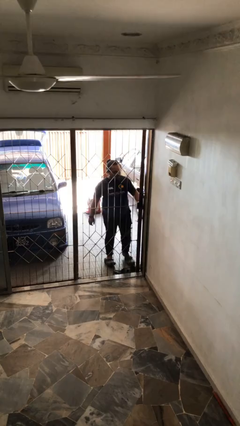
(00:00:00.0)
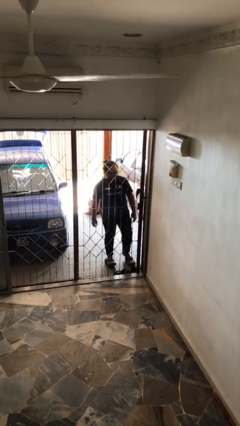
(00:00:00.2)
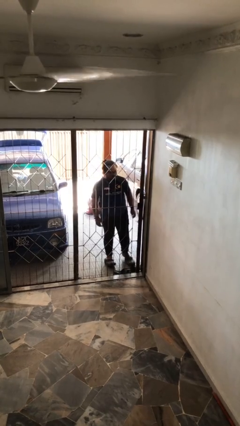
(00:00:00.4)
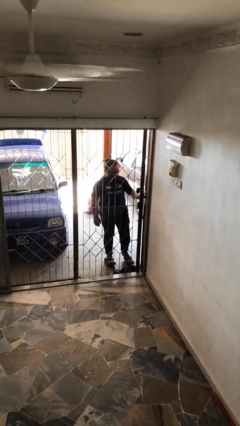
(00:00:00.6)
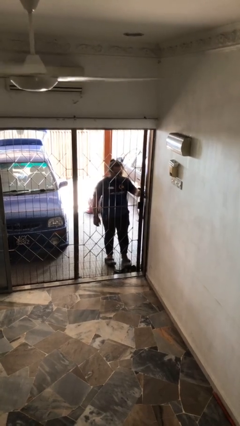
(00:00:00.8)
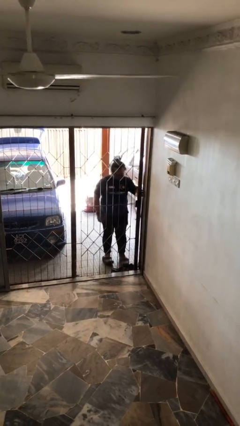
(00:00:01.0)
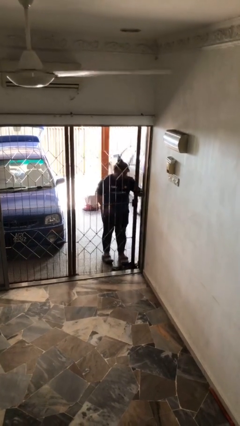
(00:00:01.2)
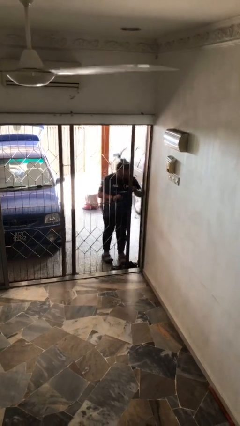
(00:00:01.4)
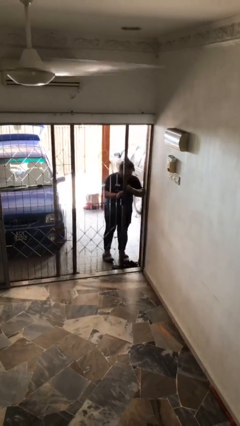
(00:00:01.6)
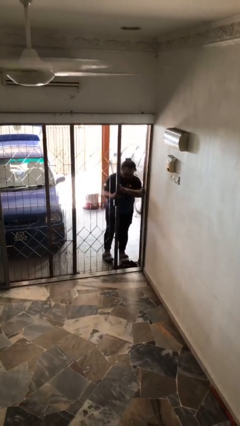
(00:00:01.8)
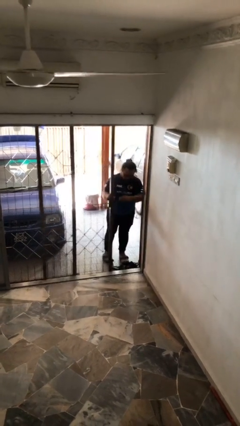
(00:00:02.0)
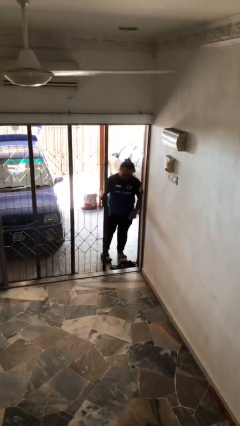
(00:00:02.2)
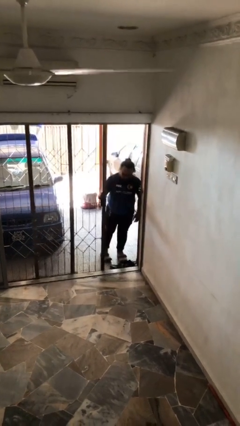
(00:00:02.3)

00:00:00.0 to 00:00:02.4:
person opens facility door

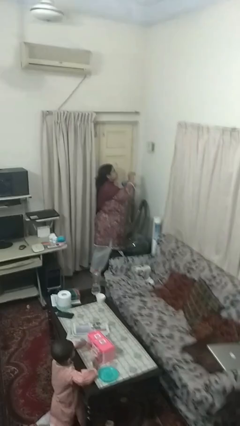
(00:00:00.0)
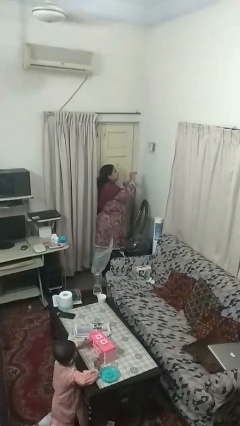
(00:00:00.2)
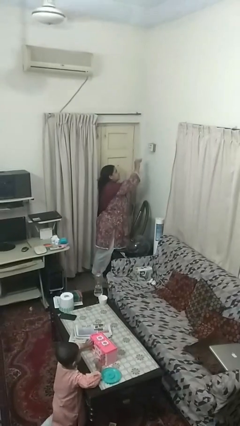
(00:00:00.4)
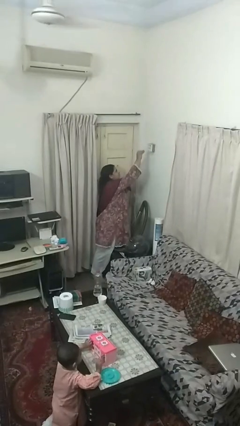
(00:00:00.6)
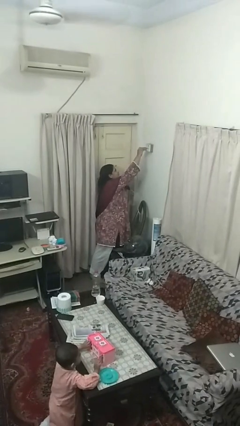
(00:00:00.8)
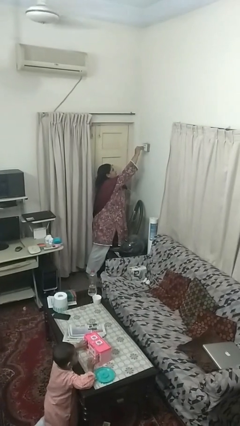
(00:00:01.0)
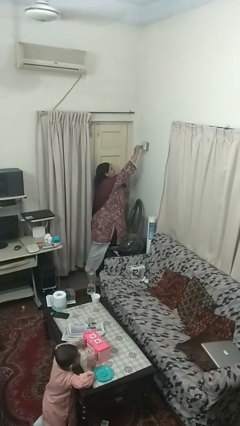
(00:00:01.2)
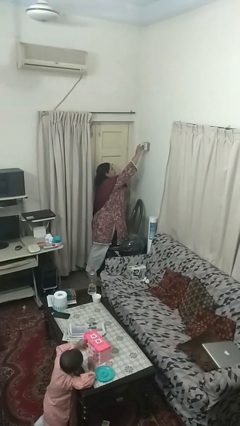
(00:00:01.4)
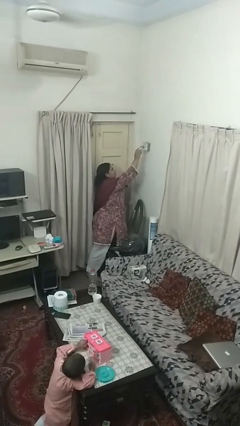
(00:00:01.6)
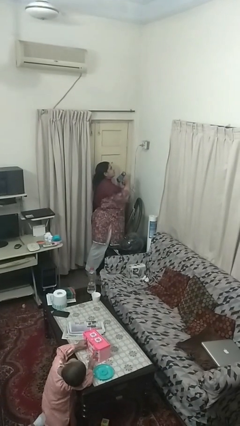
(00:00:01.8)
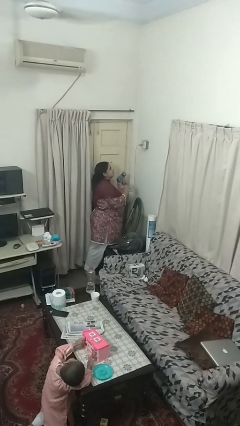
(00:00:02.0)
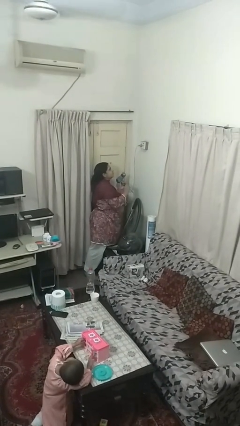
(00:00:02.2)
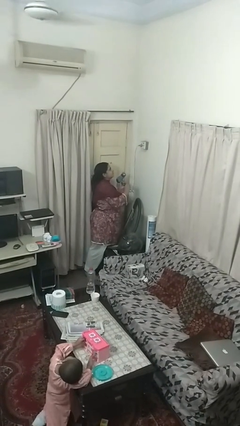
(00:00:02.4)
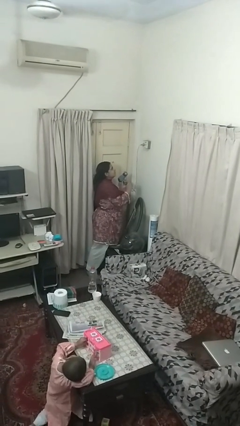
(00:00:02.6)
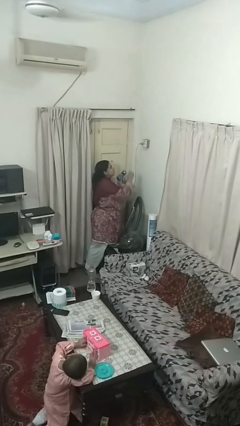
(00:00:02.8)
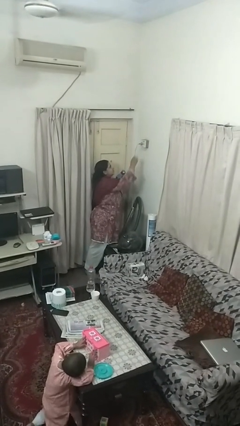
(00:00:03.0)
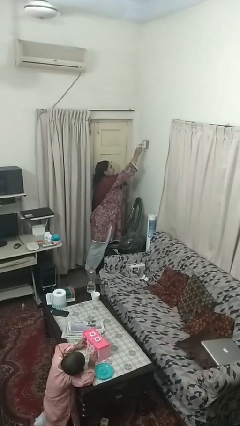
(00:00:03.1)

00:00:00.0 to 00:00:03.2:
person plugs into electrical socket

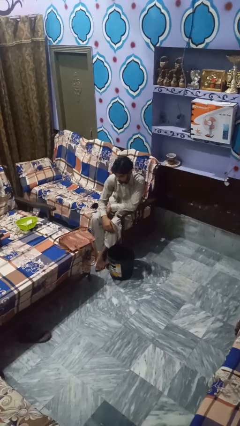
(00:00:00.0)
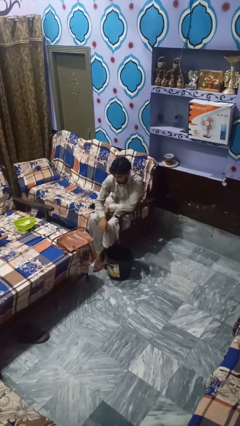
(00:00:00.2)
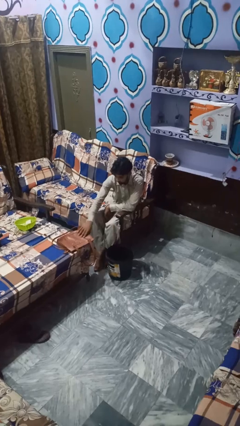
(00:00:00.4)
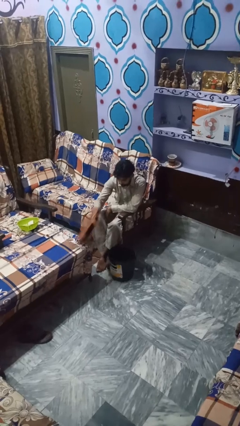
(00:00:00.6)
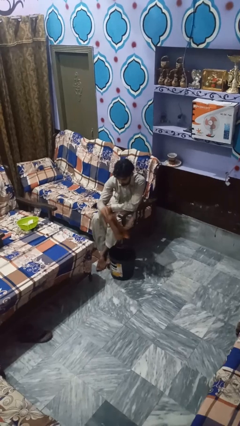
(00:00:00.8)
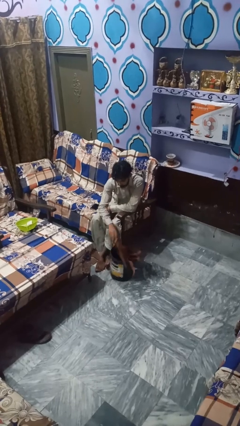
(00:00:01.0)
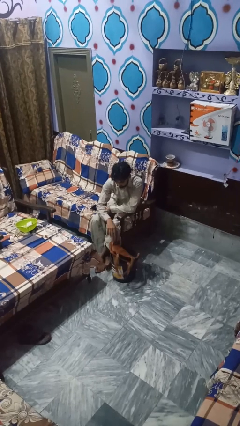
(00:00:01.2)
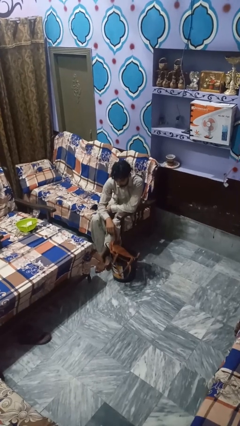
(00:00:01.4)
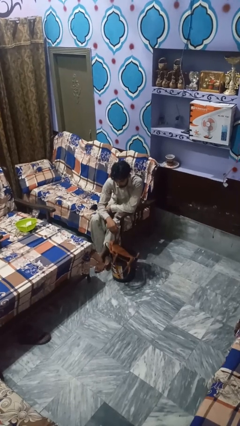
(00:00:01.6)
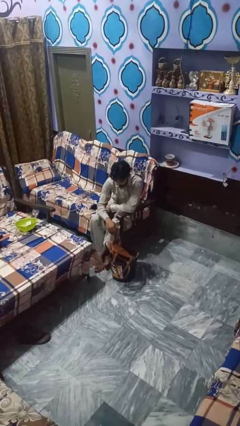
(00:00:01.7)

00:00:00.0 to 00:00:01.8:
person puts object into basket

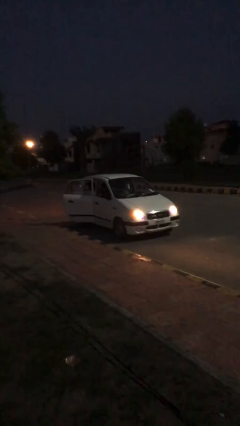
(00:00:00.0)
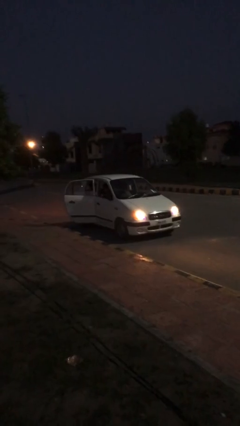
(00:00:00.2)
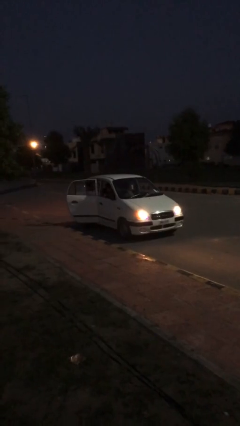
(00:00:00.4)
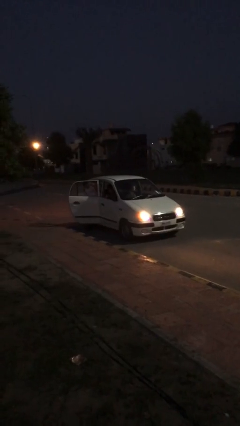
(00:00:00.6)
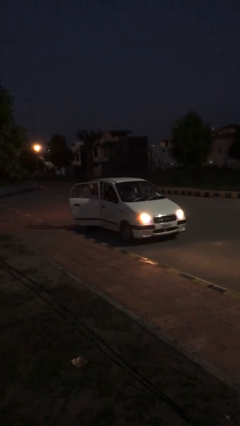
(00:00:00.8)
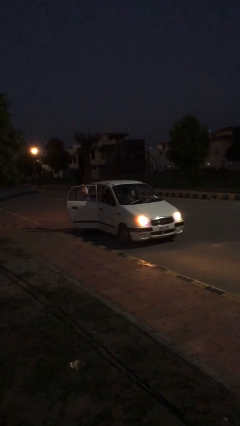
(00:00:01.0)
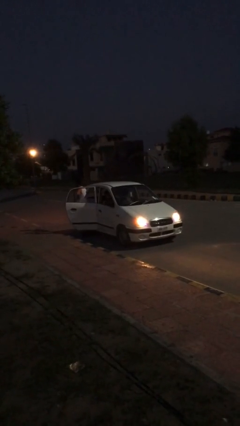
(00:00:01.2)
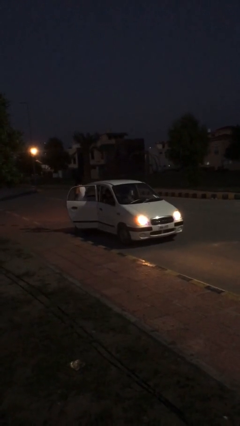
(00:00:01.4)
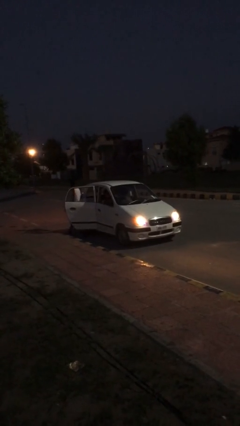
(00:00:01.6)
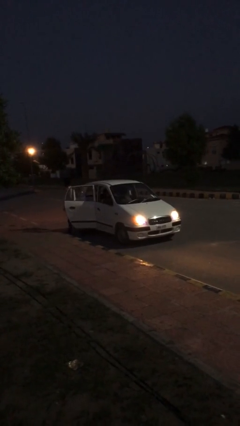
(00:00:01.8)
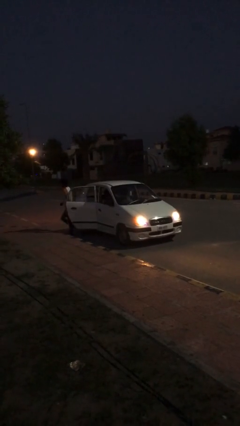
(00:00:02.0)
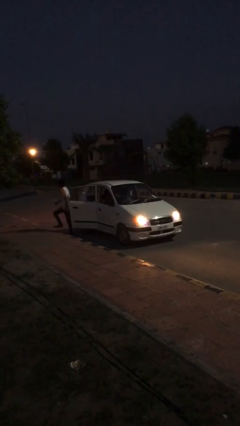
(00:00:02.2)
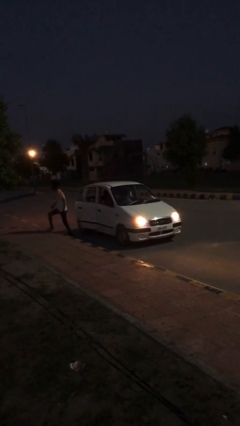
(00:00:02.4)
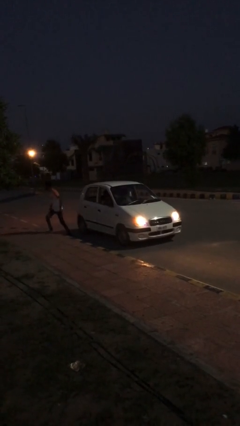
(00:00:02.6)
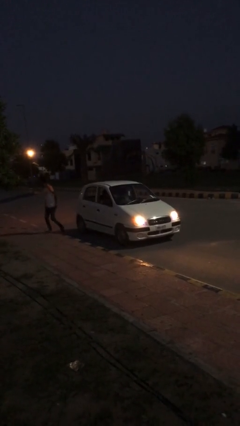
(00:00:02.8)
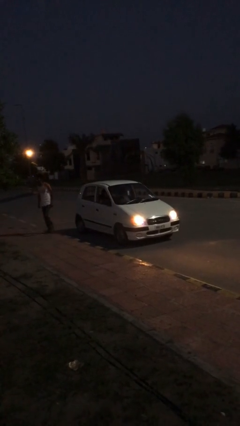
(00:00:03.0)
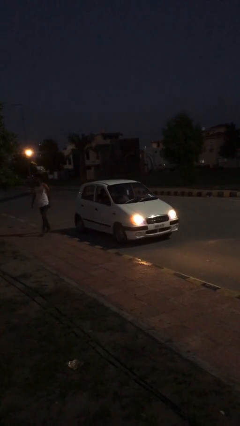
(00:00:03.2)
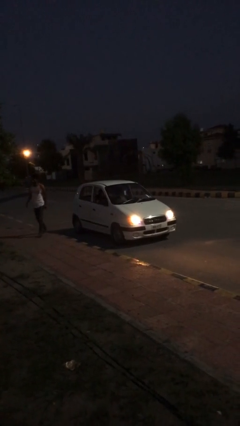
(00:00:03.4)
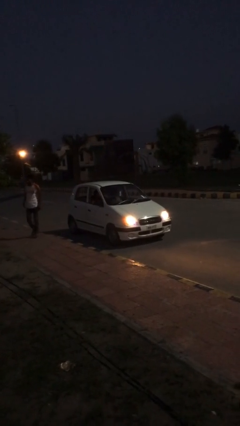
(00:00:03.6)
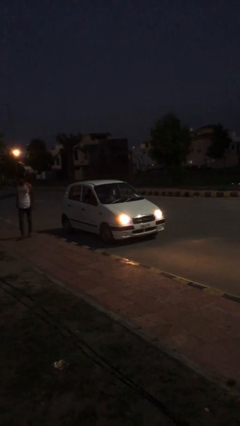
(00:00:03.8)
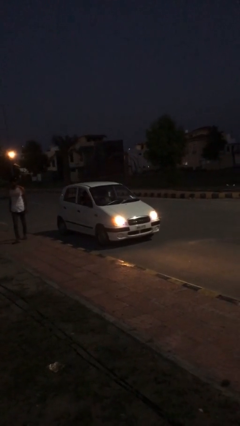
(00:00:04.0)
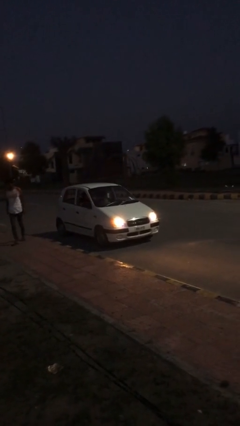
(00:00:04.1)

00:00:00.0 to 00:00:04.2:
car drops off person

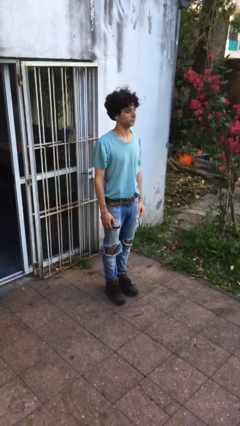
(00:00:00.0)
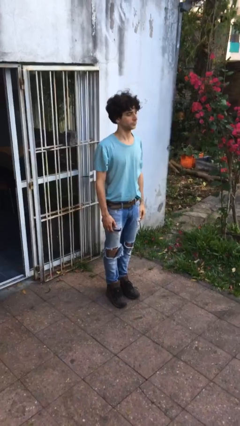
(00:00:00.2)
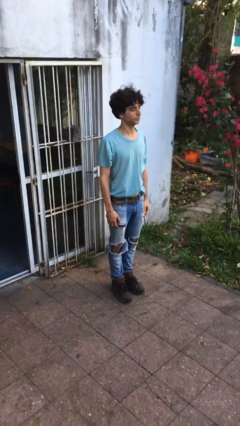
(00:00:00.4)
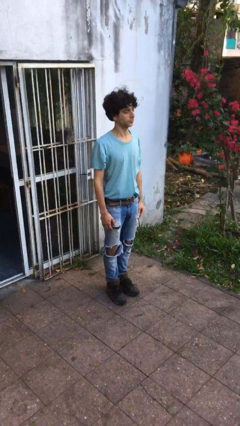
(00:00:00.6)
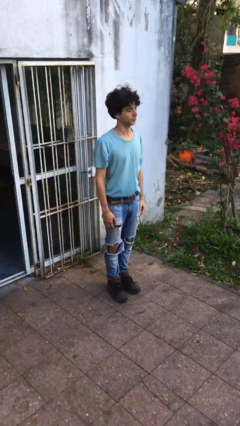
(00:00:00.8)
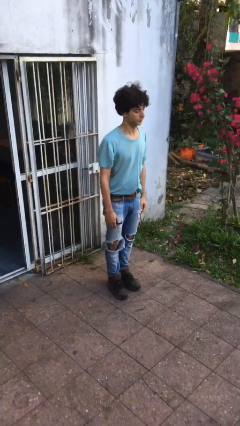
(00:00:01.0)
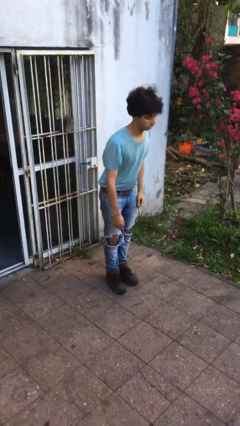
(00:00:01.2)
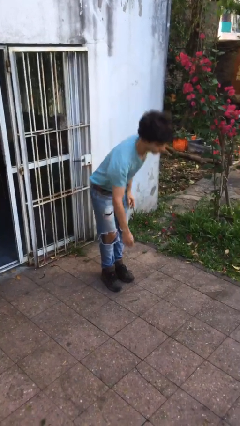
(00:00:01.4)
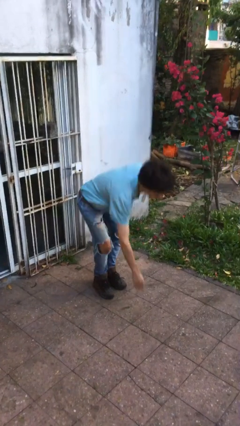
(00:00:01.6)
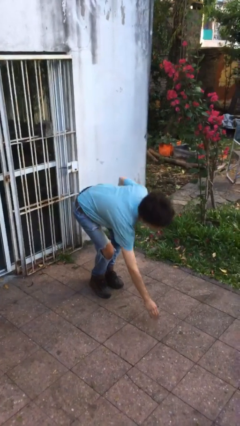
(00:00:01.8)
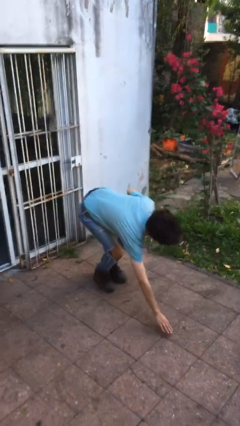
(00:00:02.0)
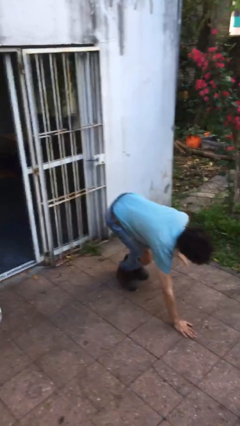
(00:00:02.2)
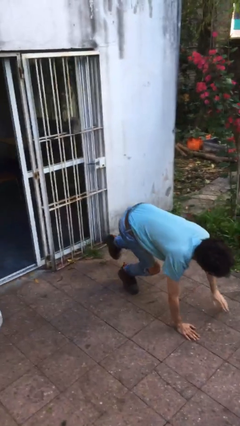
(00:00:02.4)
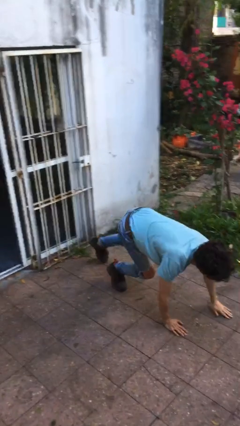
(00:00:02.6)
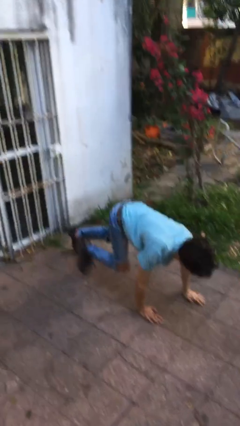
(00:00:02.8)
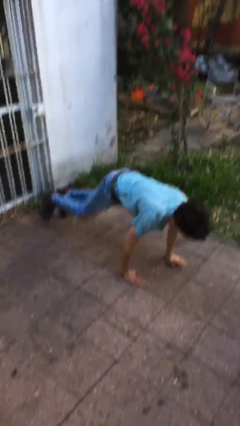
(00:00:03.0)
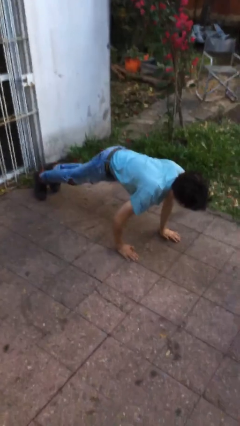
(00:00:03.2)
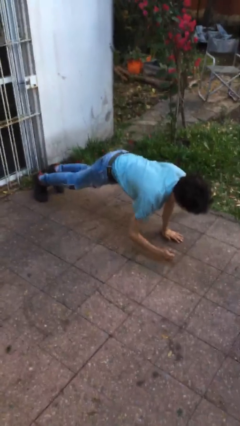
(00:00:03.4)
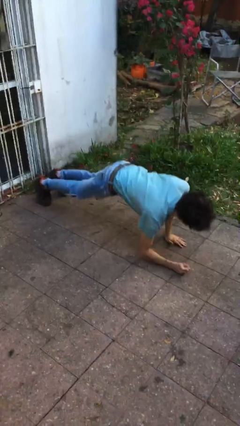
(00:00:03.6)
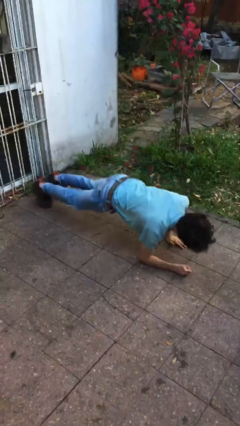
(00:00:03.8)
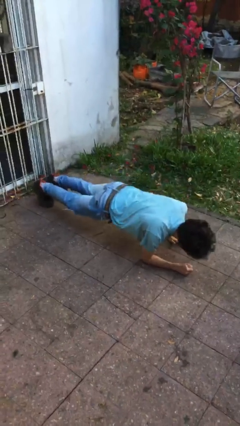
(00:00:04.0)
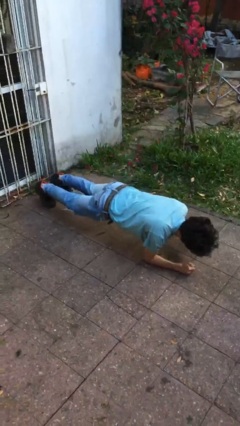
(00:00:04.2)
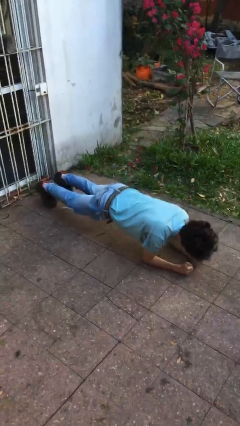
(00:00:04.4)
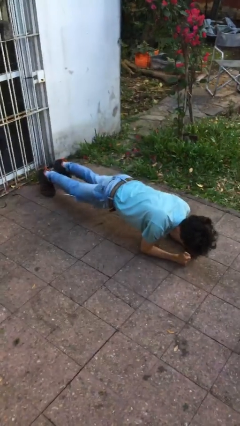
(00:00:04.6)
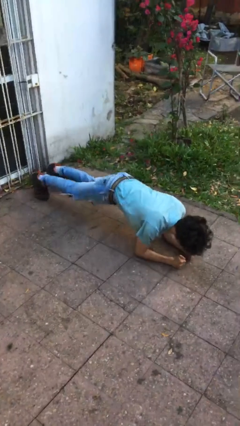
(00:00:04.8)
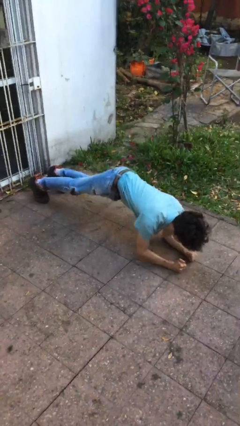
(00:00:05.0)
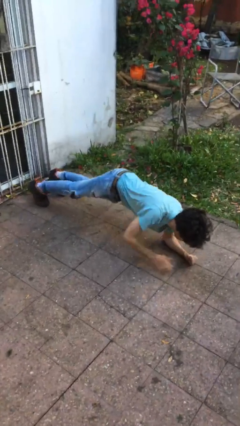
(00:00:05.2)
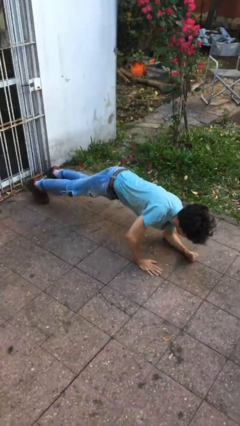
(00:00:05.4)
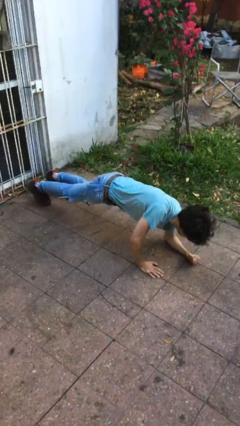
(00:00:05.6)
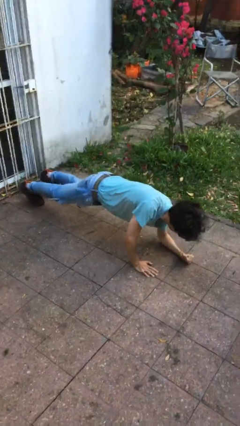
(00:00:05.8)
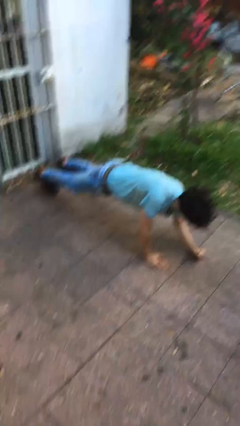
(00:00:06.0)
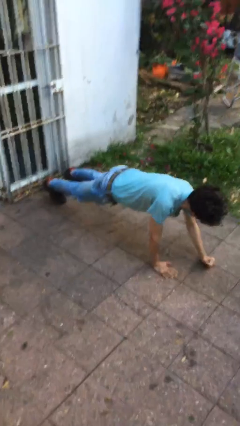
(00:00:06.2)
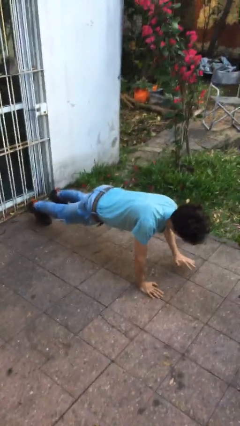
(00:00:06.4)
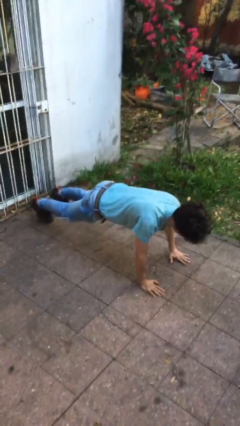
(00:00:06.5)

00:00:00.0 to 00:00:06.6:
person exercises with plank
